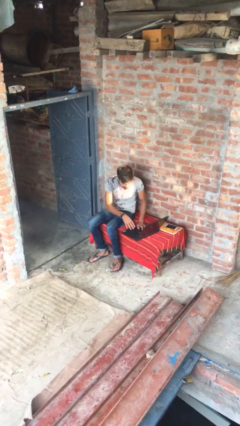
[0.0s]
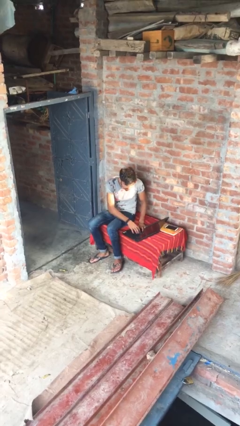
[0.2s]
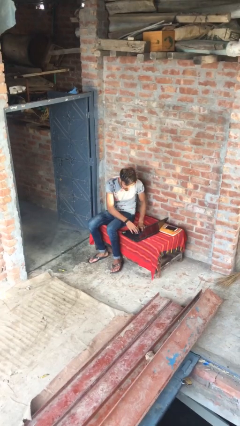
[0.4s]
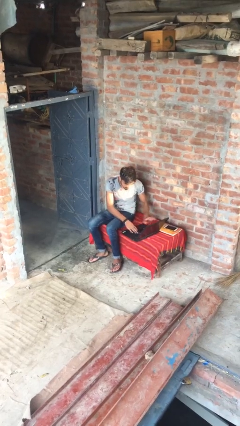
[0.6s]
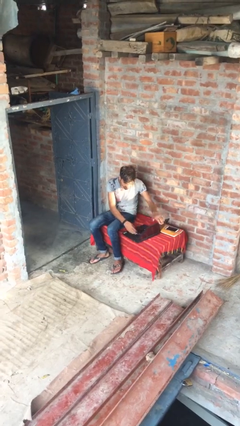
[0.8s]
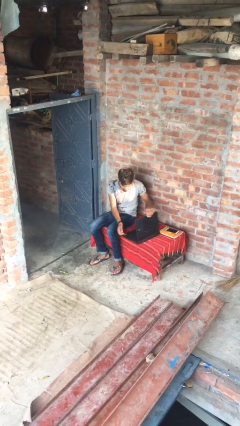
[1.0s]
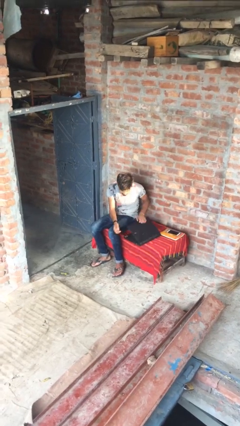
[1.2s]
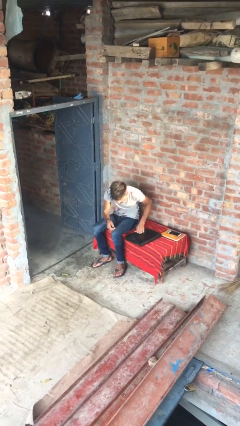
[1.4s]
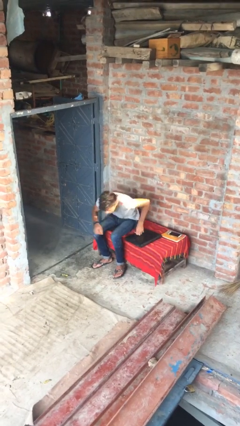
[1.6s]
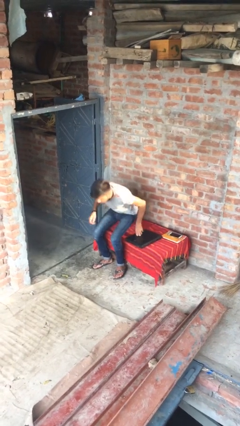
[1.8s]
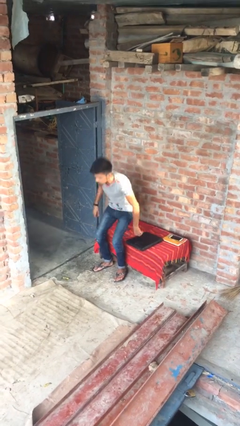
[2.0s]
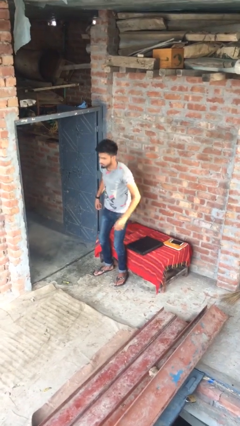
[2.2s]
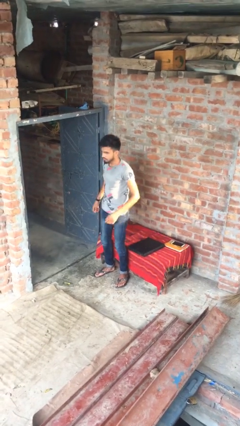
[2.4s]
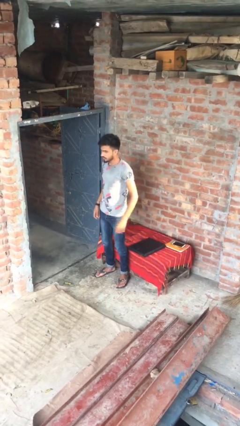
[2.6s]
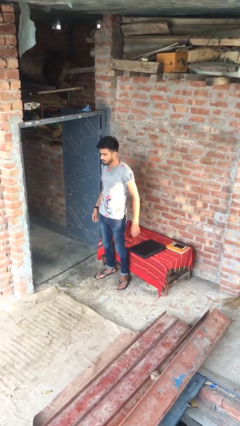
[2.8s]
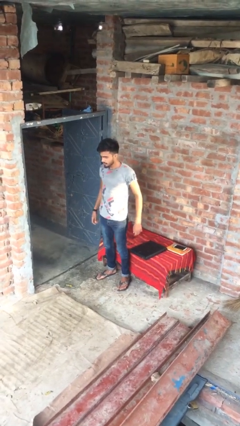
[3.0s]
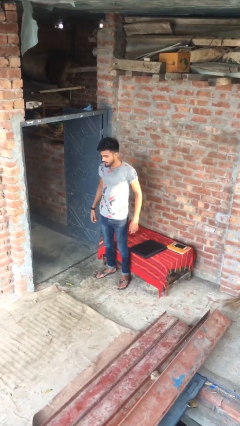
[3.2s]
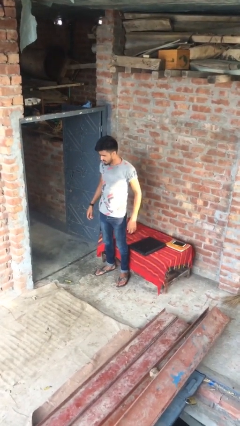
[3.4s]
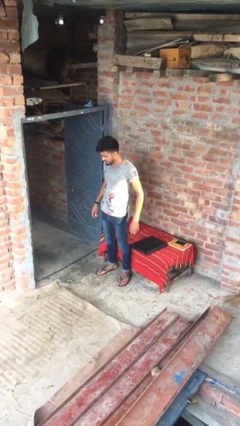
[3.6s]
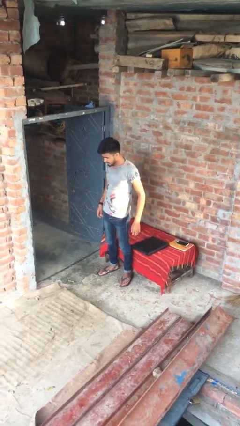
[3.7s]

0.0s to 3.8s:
person stands up

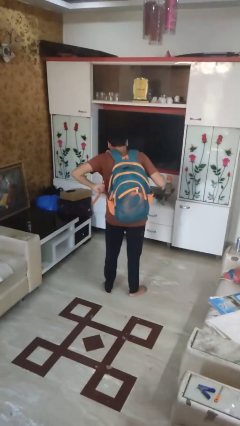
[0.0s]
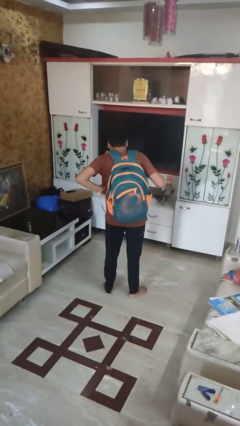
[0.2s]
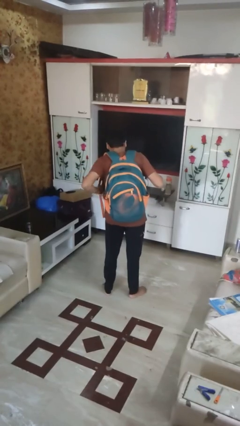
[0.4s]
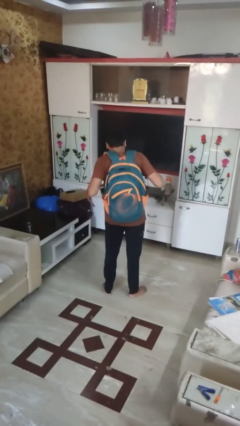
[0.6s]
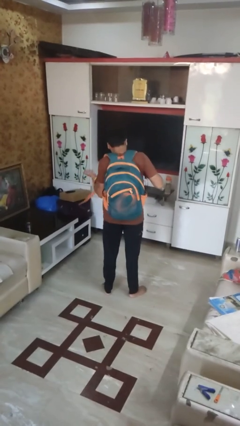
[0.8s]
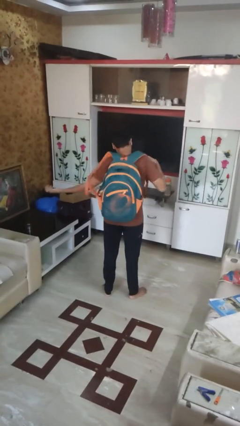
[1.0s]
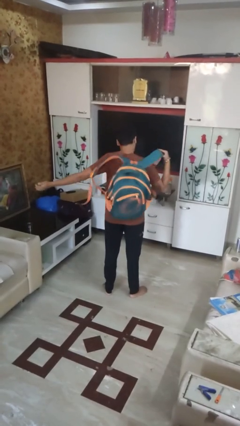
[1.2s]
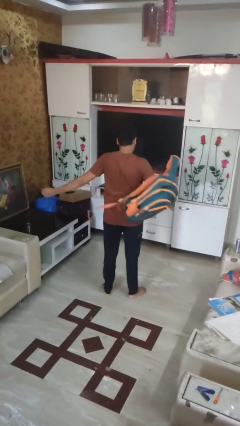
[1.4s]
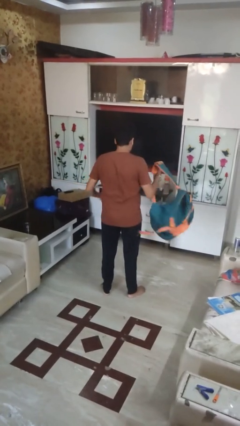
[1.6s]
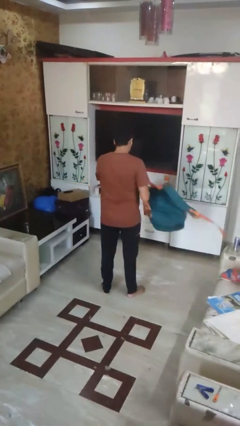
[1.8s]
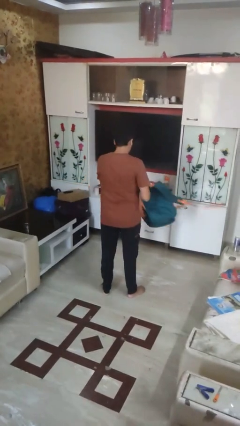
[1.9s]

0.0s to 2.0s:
person takes off backpack

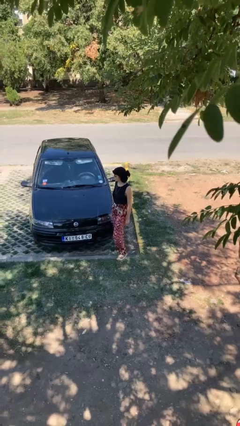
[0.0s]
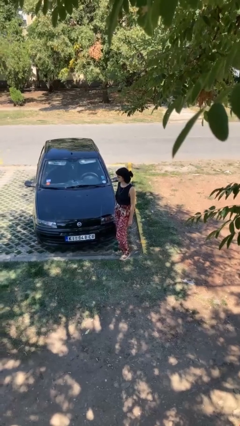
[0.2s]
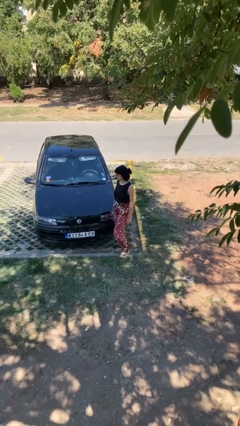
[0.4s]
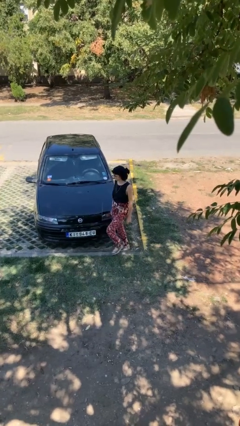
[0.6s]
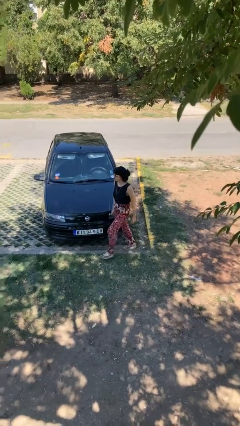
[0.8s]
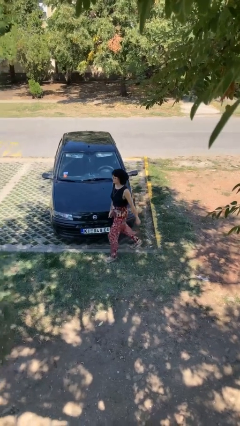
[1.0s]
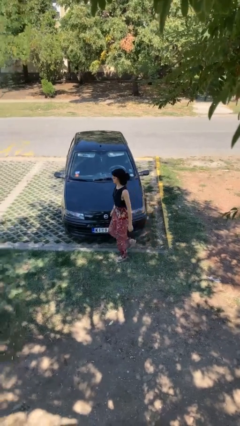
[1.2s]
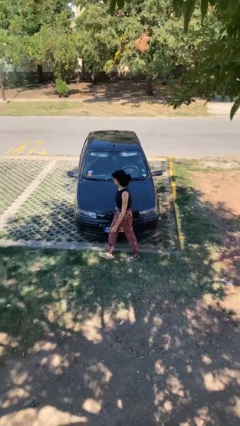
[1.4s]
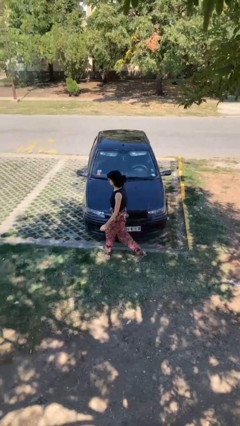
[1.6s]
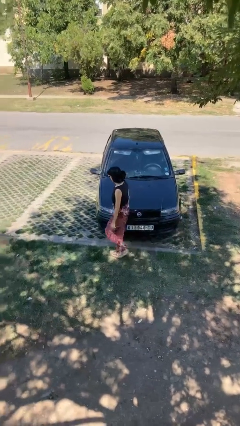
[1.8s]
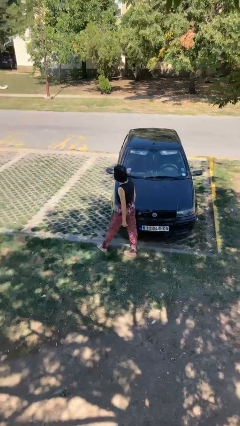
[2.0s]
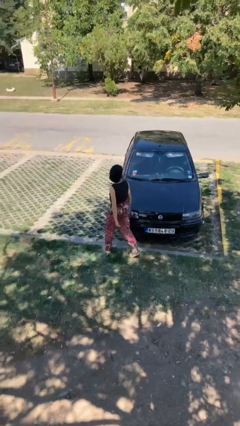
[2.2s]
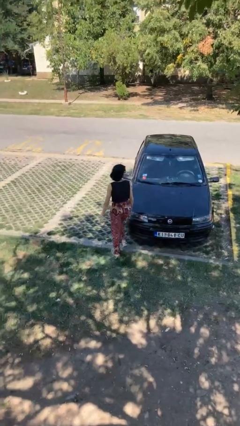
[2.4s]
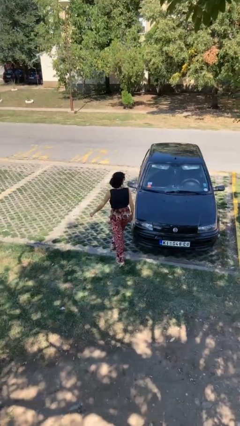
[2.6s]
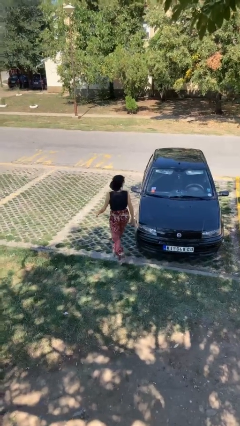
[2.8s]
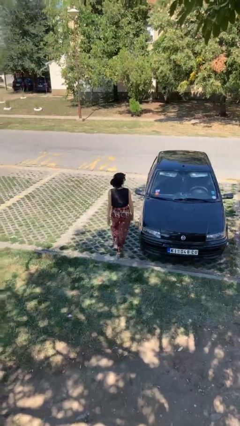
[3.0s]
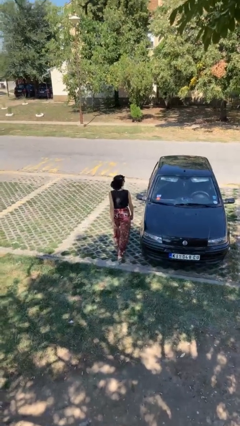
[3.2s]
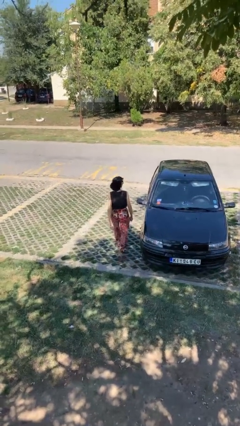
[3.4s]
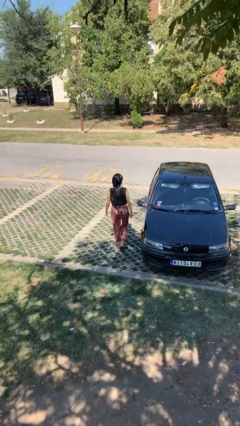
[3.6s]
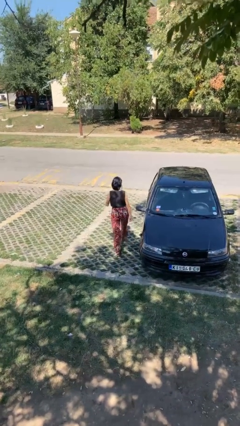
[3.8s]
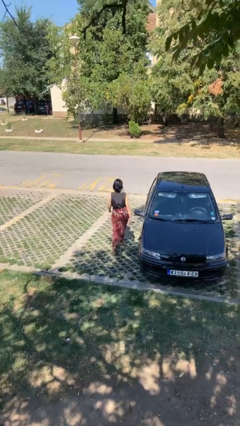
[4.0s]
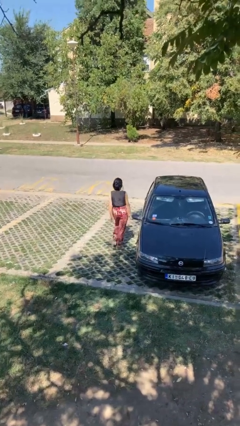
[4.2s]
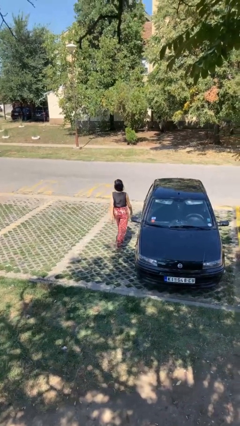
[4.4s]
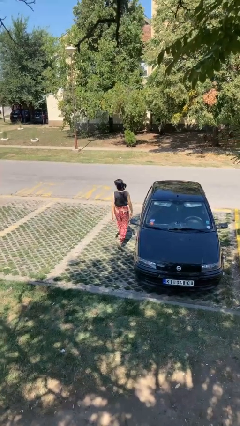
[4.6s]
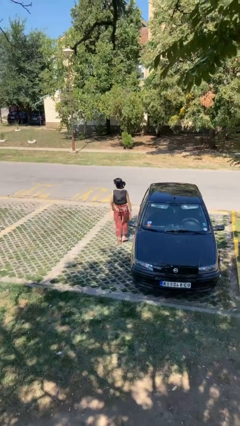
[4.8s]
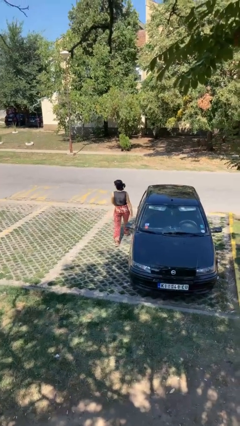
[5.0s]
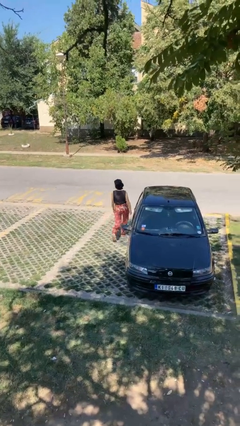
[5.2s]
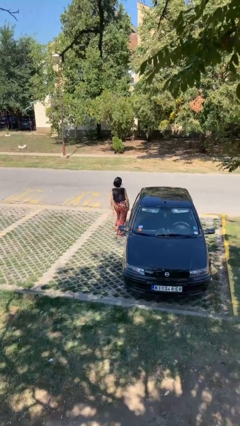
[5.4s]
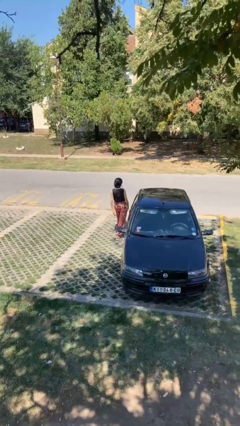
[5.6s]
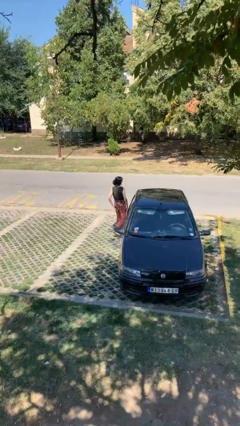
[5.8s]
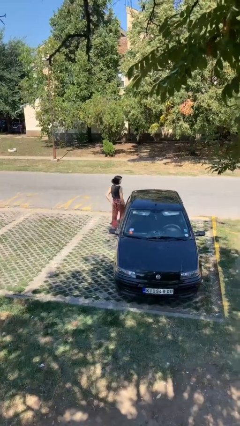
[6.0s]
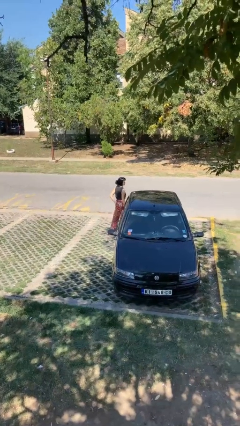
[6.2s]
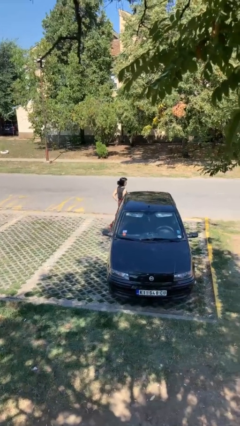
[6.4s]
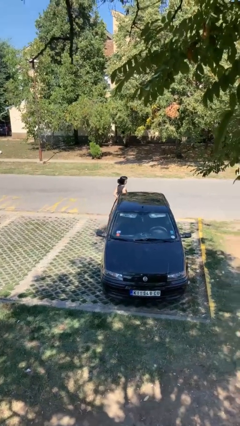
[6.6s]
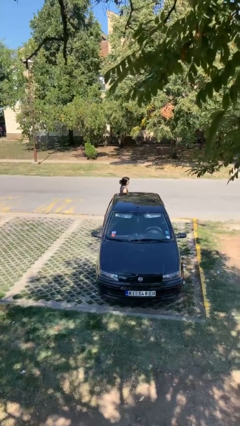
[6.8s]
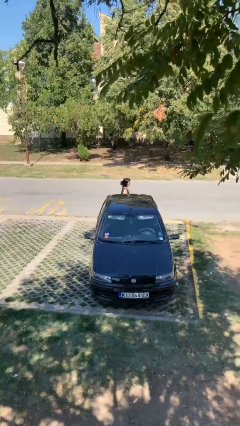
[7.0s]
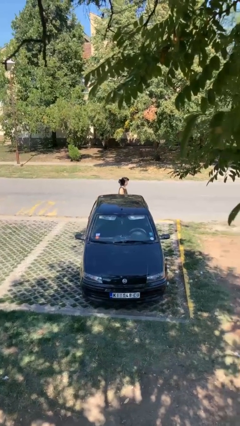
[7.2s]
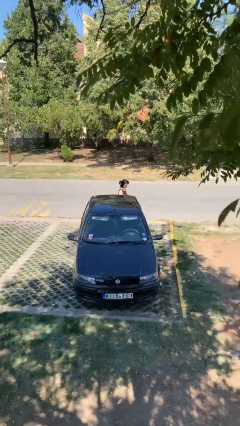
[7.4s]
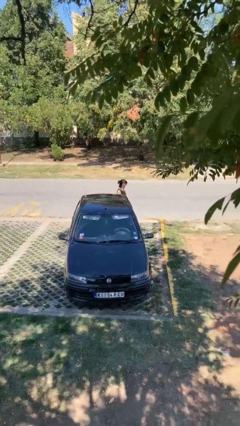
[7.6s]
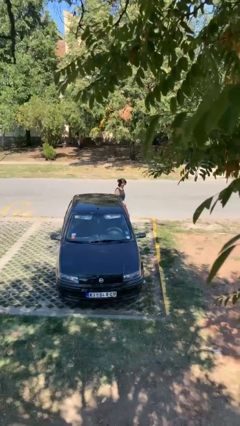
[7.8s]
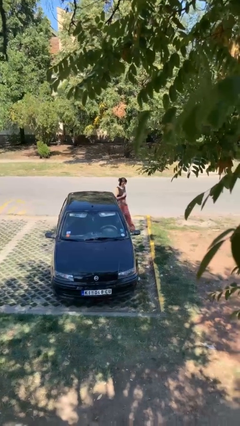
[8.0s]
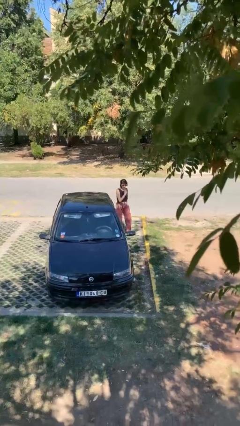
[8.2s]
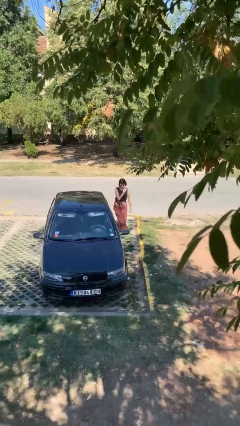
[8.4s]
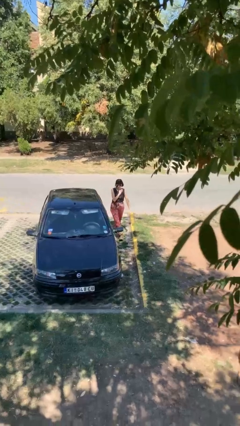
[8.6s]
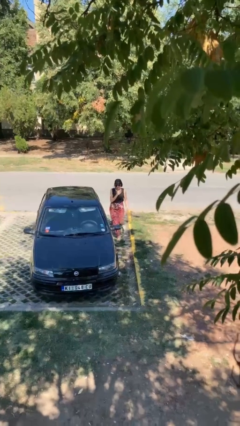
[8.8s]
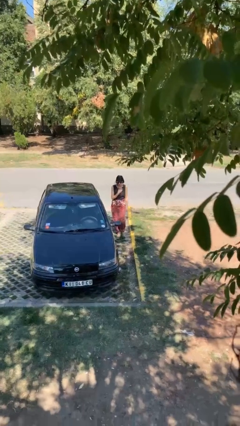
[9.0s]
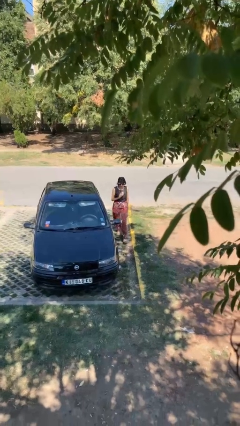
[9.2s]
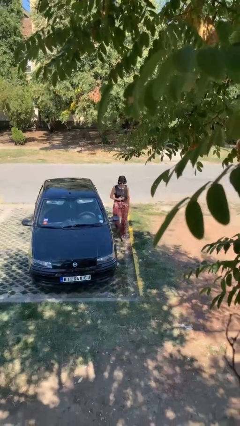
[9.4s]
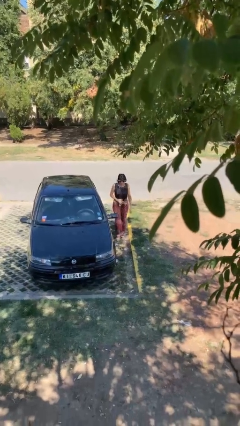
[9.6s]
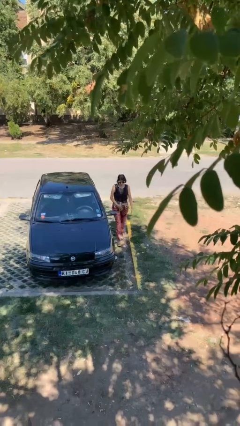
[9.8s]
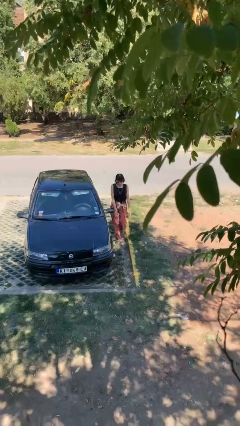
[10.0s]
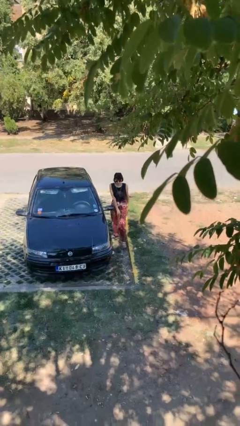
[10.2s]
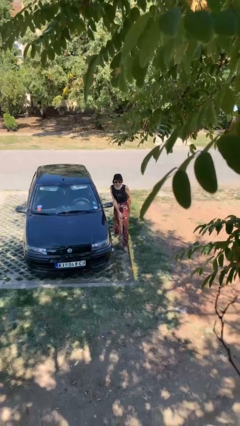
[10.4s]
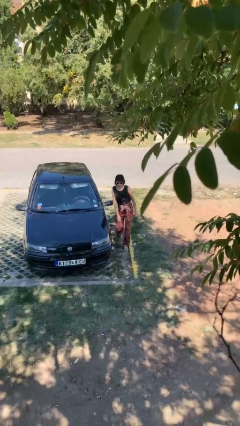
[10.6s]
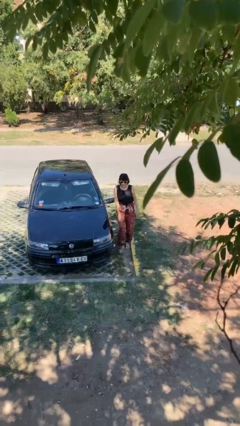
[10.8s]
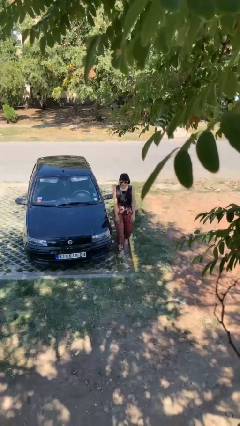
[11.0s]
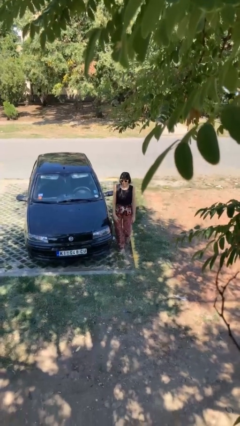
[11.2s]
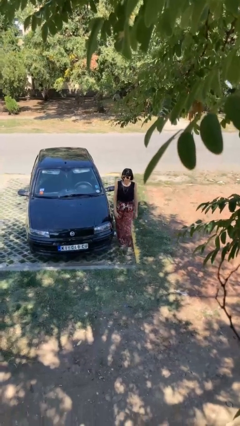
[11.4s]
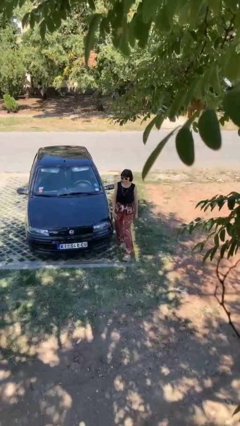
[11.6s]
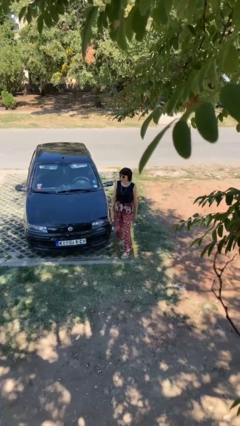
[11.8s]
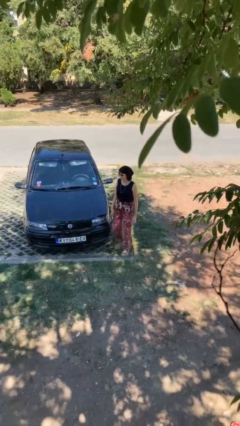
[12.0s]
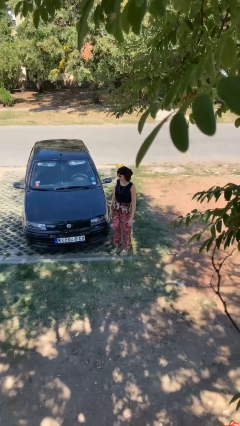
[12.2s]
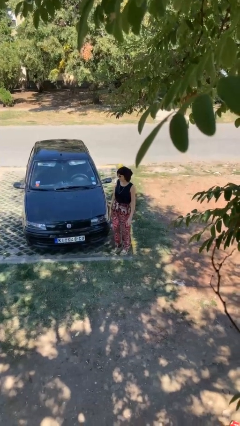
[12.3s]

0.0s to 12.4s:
person walks around car
